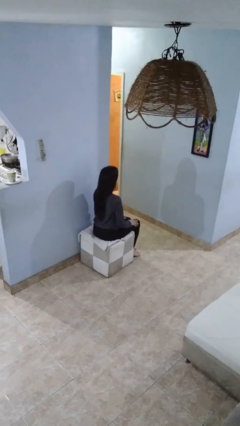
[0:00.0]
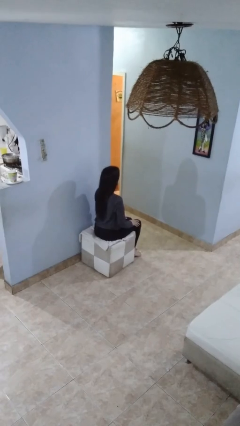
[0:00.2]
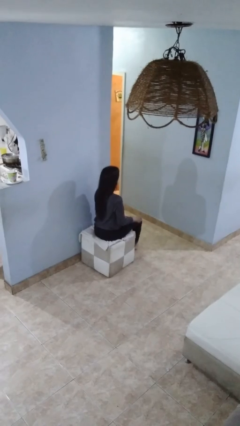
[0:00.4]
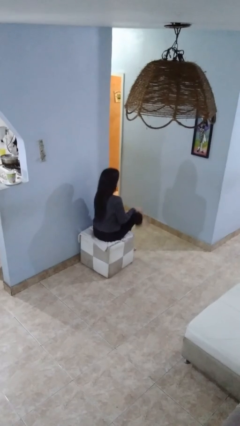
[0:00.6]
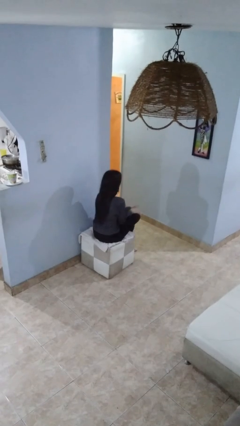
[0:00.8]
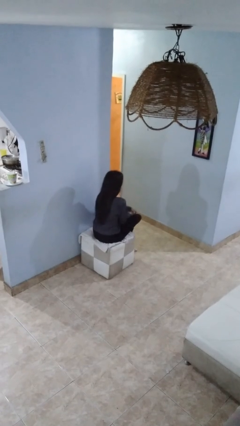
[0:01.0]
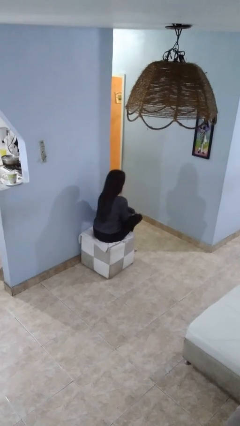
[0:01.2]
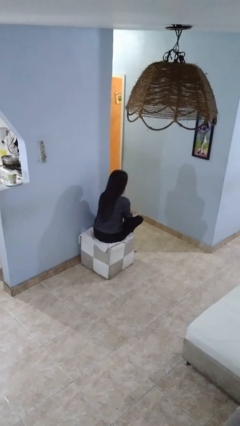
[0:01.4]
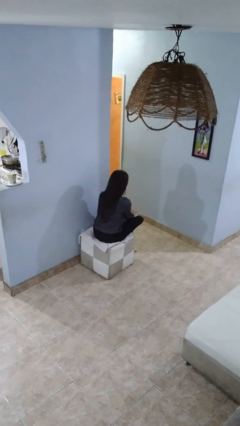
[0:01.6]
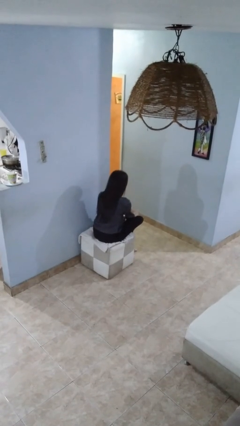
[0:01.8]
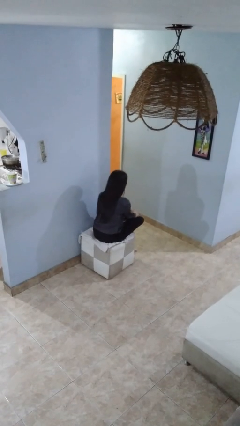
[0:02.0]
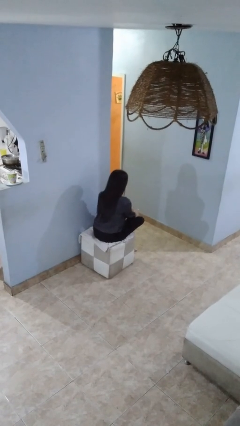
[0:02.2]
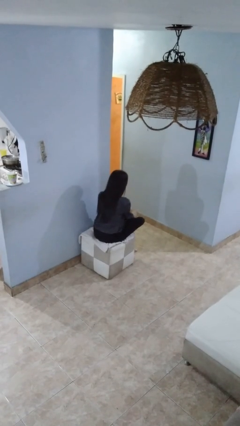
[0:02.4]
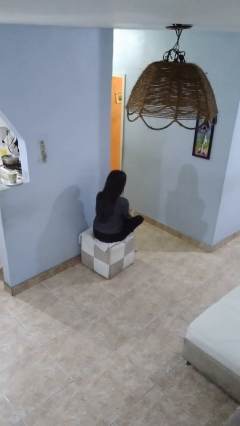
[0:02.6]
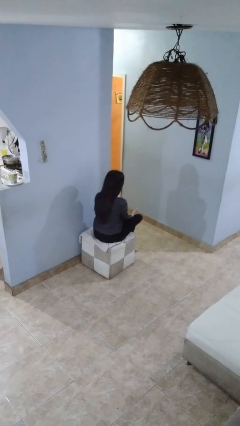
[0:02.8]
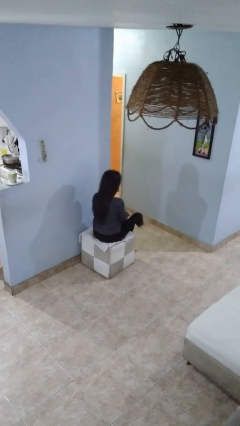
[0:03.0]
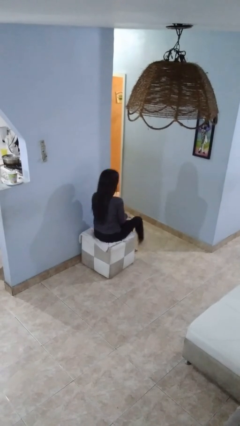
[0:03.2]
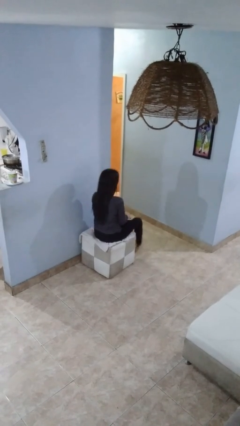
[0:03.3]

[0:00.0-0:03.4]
person rubs foot

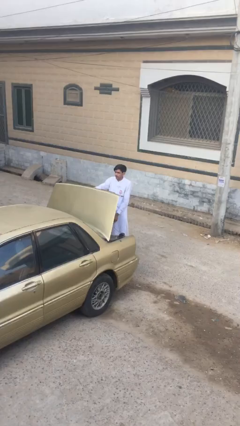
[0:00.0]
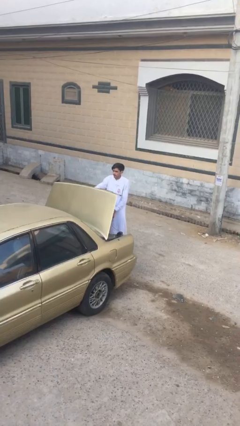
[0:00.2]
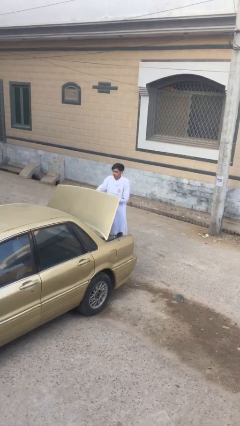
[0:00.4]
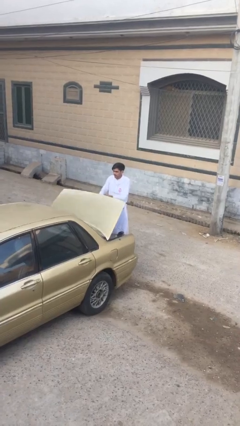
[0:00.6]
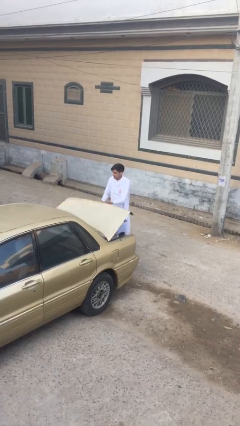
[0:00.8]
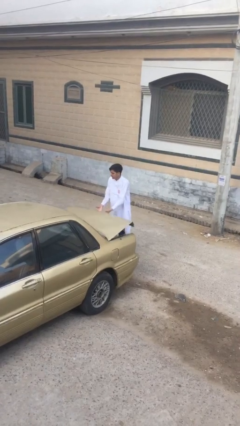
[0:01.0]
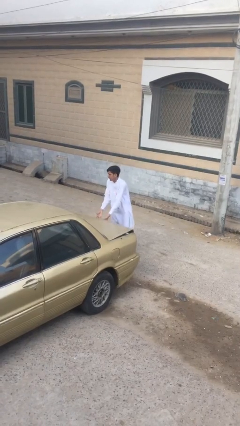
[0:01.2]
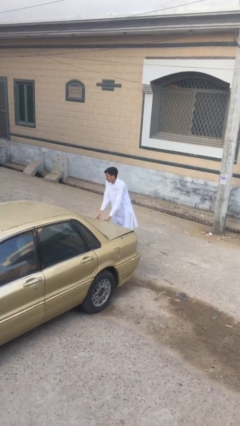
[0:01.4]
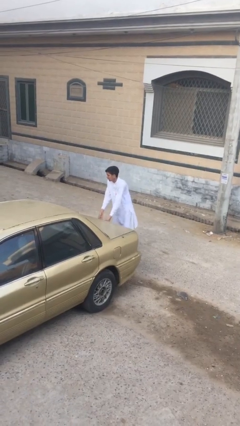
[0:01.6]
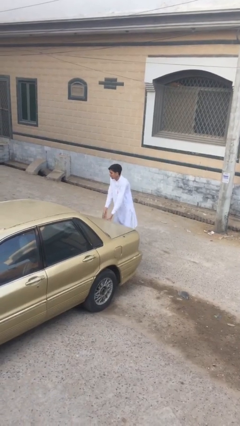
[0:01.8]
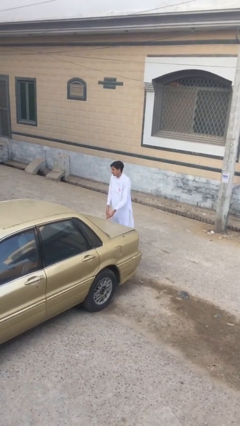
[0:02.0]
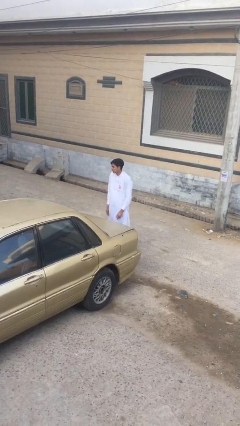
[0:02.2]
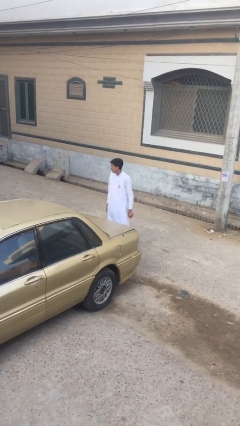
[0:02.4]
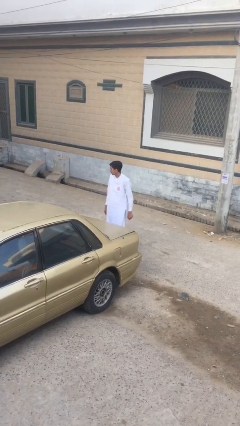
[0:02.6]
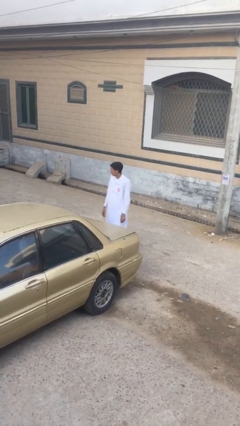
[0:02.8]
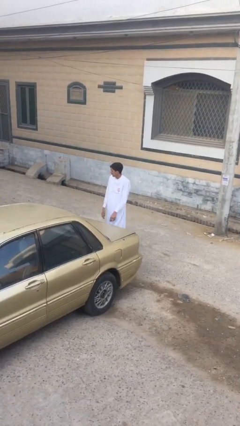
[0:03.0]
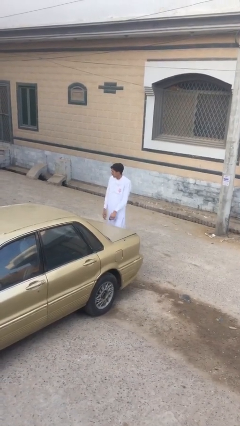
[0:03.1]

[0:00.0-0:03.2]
person closes car trunk

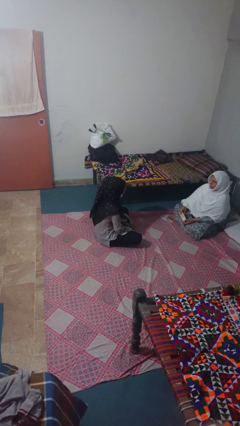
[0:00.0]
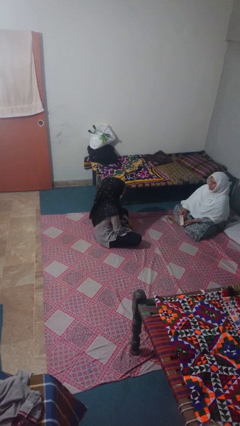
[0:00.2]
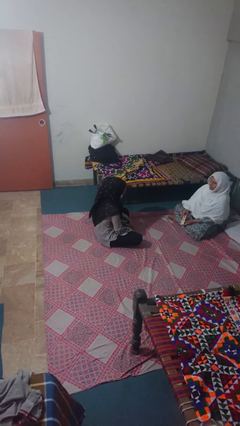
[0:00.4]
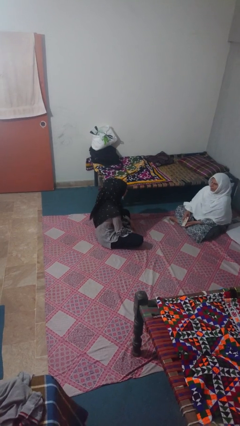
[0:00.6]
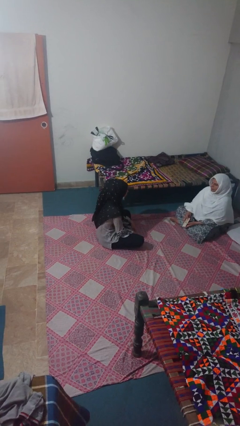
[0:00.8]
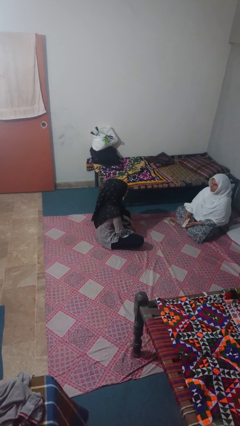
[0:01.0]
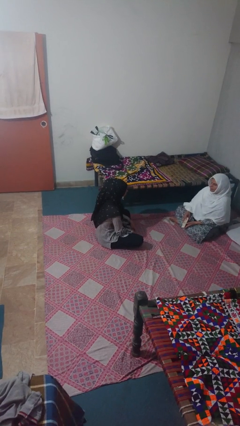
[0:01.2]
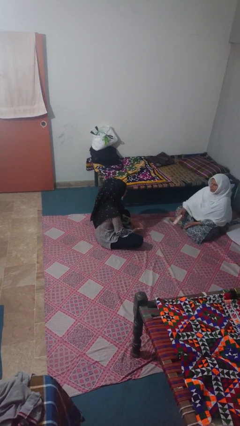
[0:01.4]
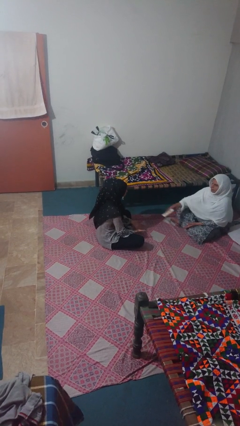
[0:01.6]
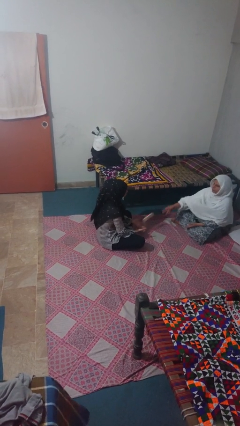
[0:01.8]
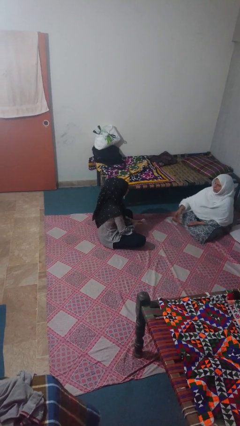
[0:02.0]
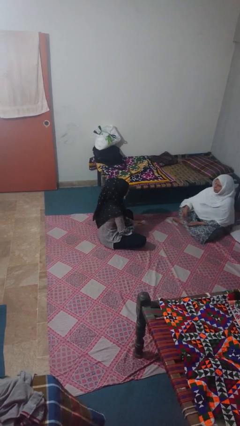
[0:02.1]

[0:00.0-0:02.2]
person catches object from person

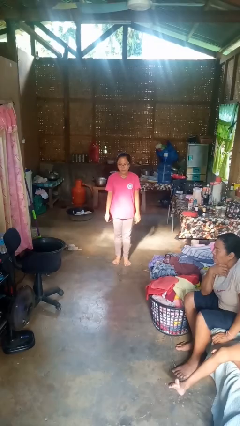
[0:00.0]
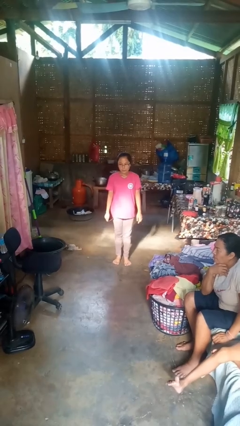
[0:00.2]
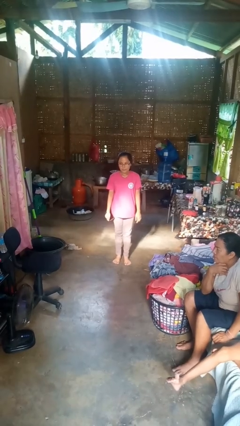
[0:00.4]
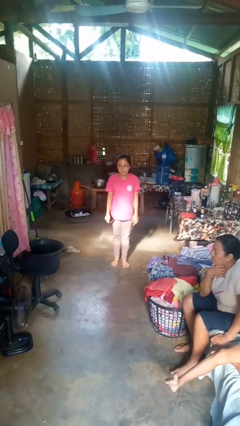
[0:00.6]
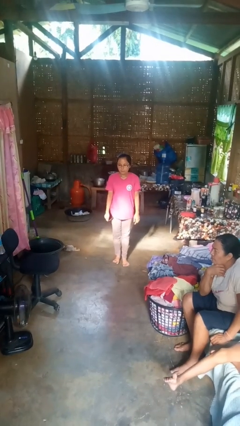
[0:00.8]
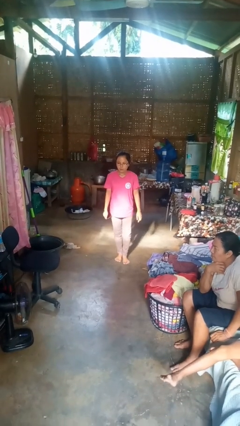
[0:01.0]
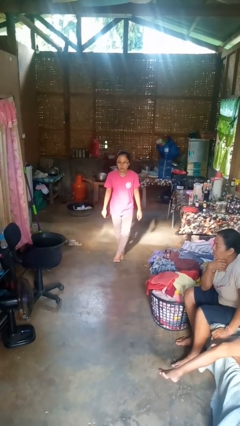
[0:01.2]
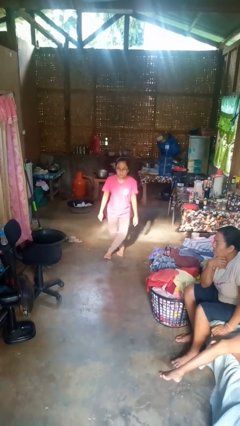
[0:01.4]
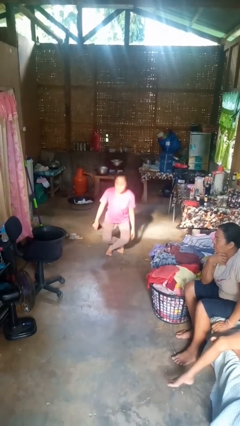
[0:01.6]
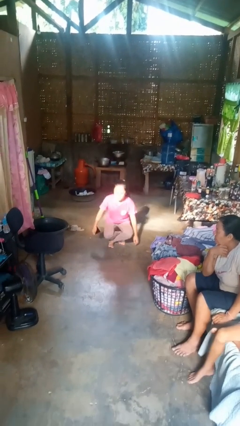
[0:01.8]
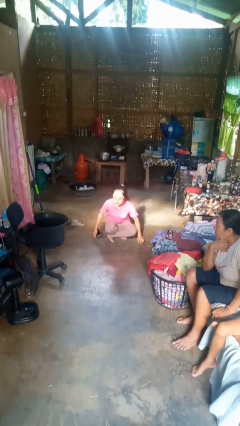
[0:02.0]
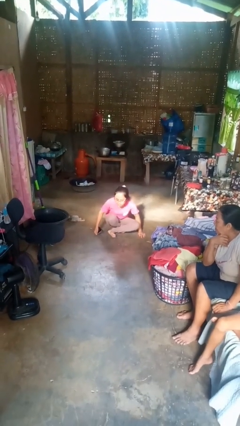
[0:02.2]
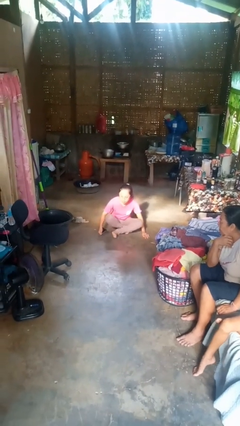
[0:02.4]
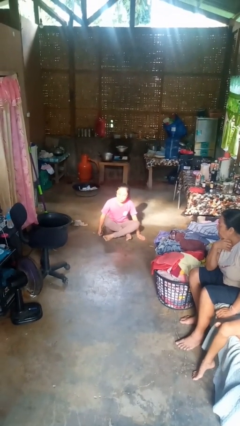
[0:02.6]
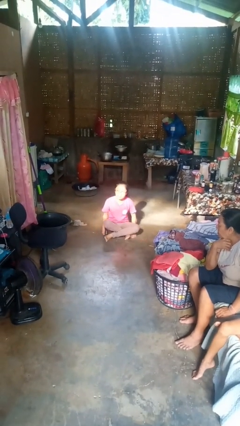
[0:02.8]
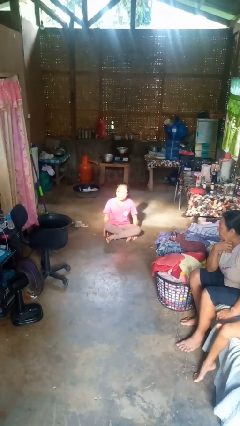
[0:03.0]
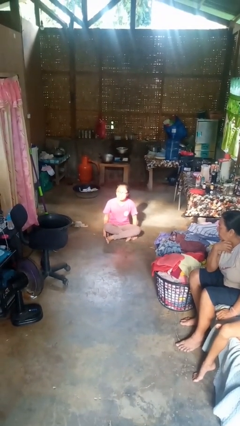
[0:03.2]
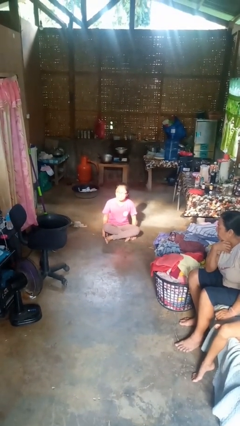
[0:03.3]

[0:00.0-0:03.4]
person sits crisscross

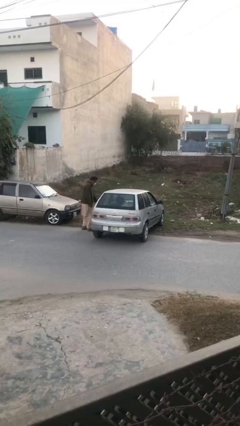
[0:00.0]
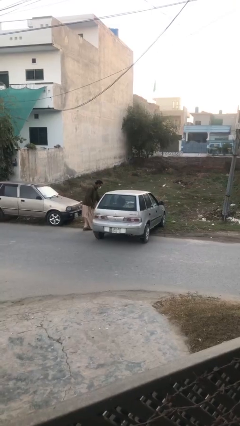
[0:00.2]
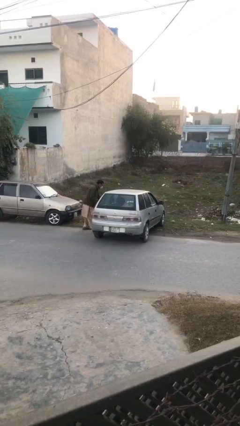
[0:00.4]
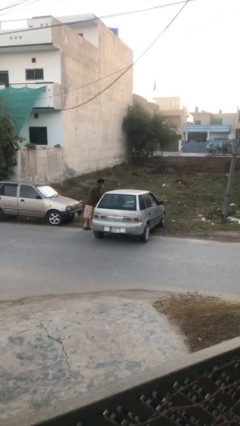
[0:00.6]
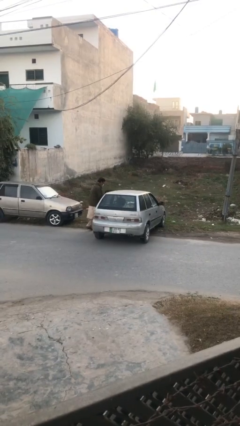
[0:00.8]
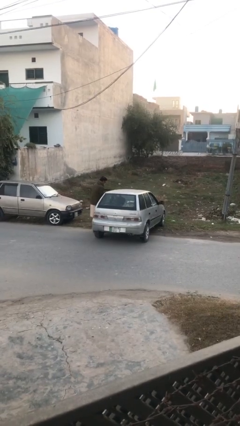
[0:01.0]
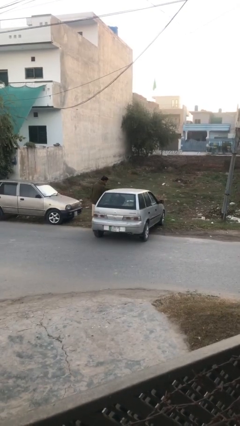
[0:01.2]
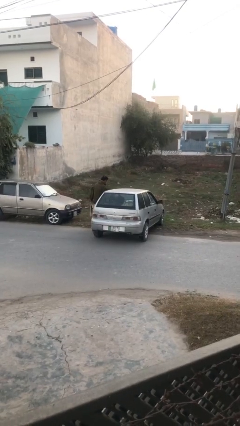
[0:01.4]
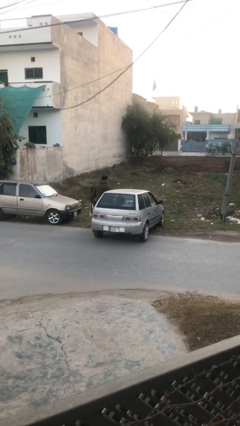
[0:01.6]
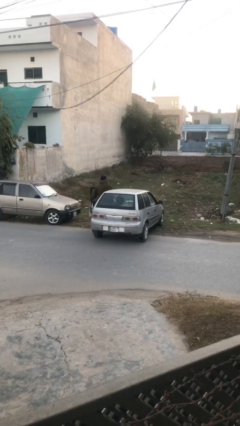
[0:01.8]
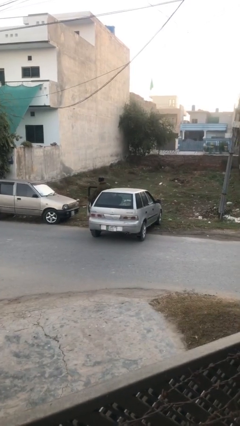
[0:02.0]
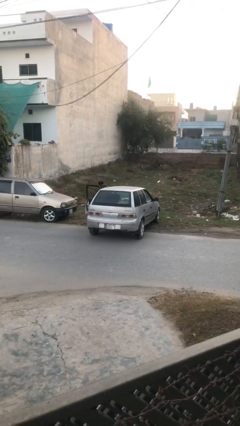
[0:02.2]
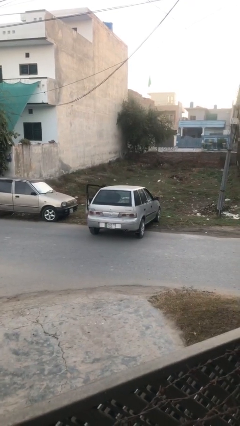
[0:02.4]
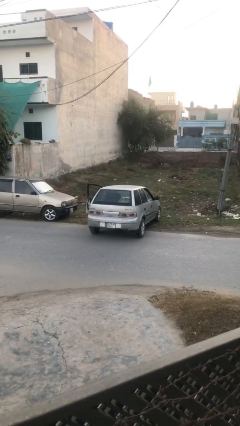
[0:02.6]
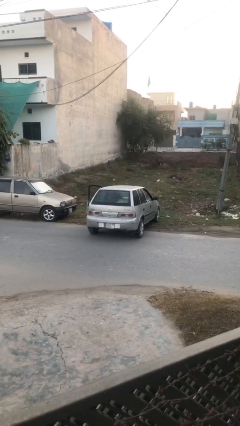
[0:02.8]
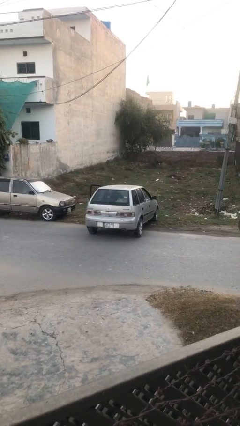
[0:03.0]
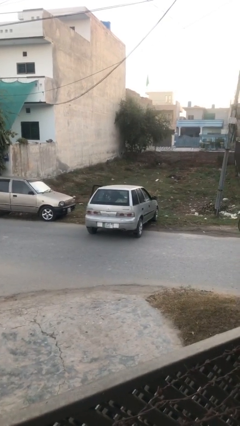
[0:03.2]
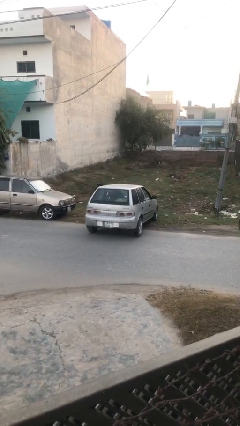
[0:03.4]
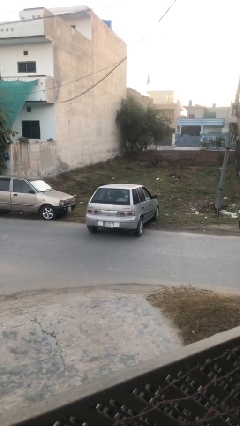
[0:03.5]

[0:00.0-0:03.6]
car picks up person

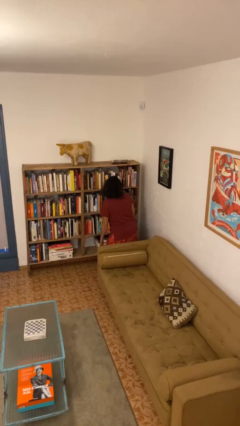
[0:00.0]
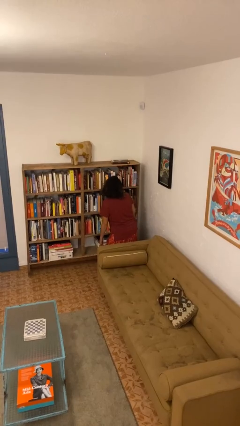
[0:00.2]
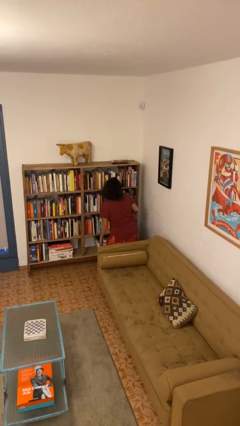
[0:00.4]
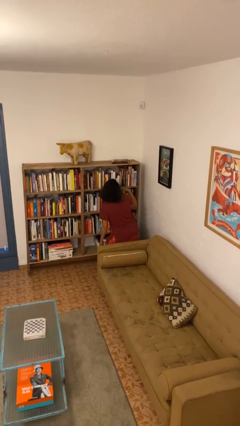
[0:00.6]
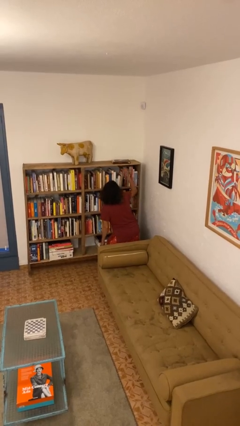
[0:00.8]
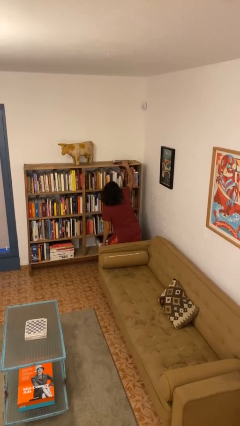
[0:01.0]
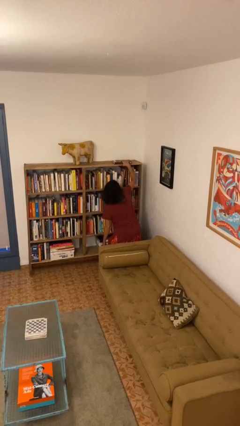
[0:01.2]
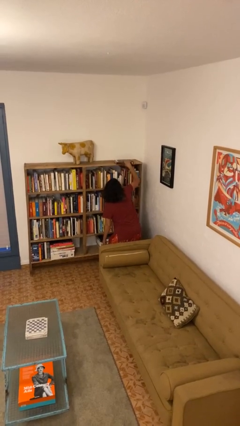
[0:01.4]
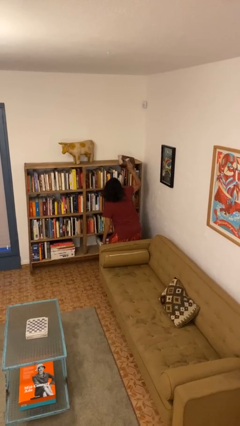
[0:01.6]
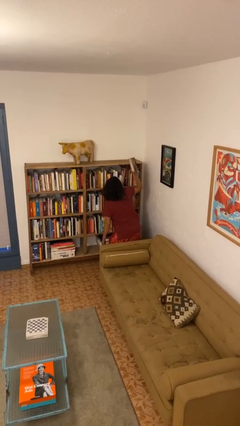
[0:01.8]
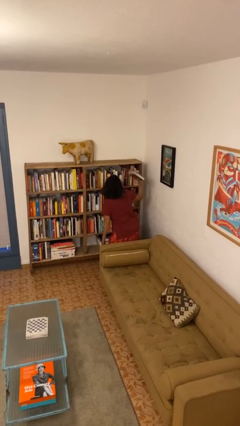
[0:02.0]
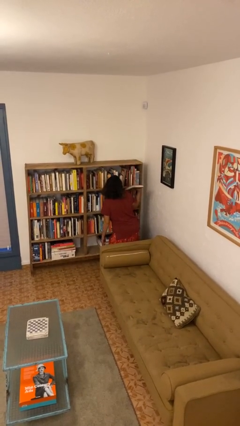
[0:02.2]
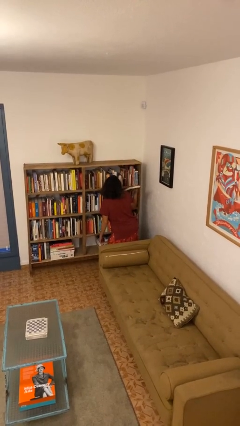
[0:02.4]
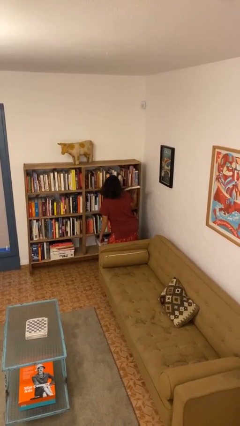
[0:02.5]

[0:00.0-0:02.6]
person picks up object from shelf
